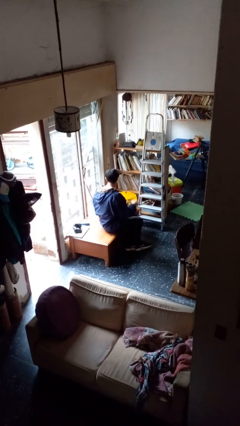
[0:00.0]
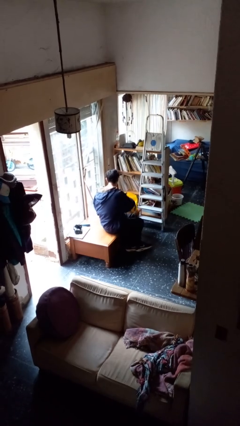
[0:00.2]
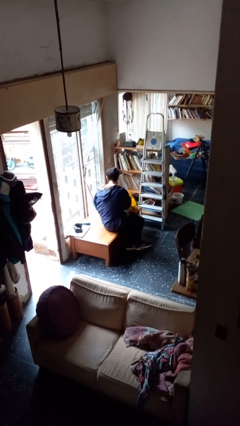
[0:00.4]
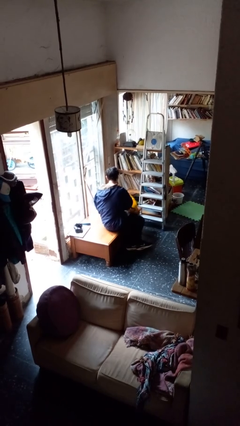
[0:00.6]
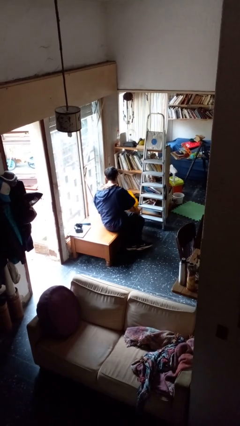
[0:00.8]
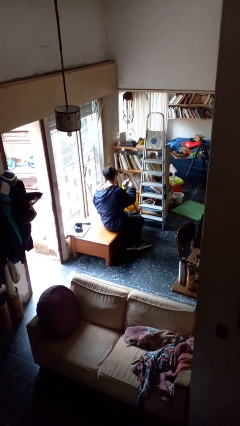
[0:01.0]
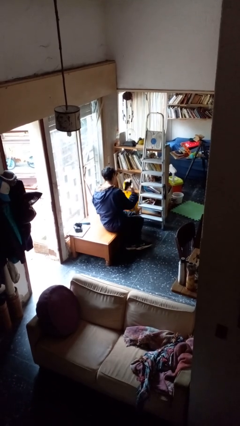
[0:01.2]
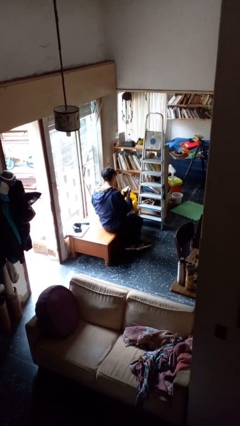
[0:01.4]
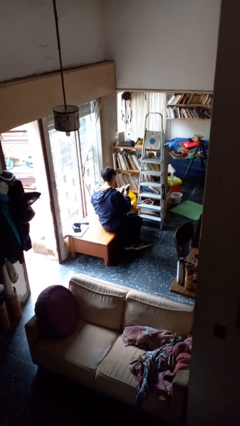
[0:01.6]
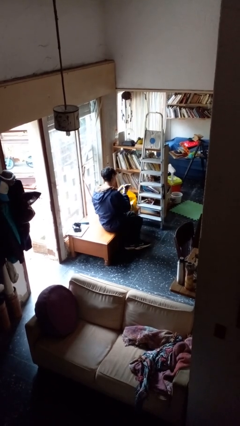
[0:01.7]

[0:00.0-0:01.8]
person takes object from bag

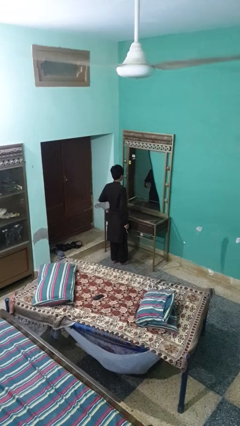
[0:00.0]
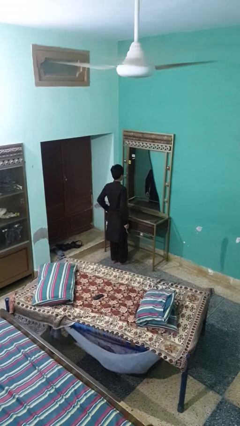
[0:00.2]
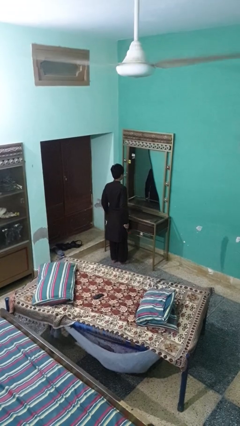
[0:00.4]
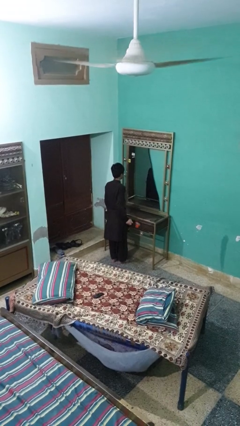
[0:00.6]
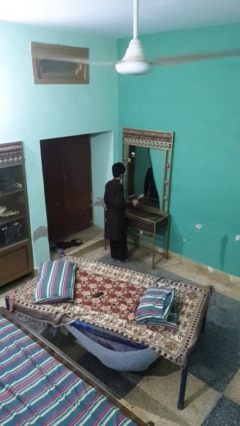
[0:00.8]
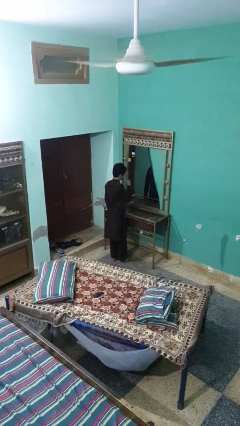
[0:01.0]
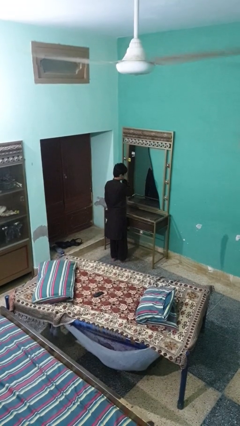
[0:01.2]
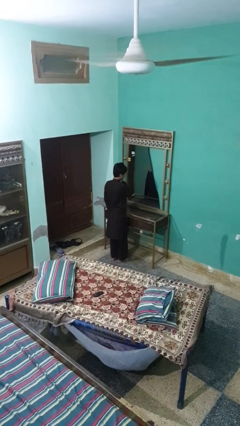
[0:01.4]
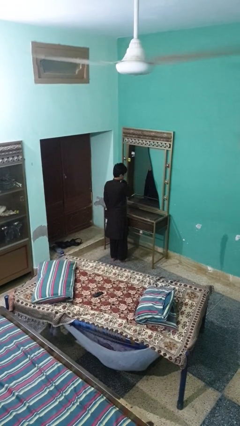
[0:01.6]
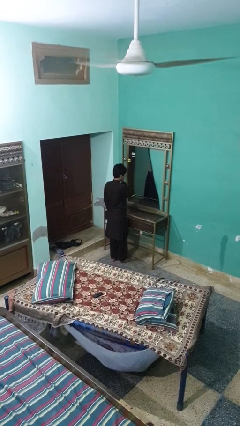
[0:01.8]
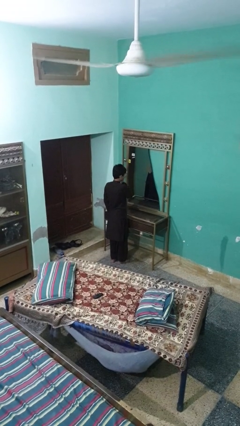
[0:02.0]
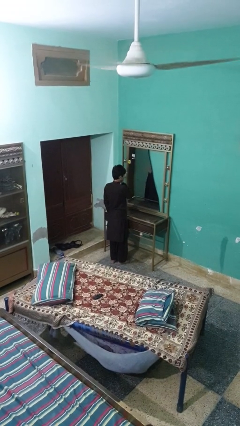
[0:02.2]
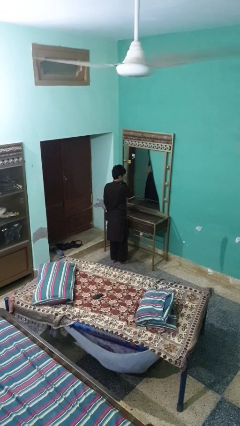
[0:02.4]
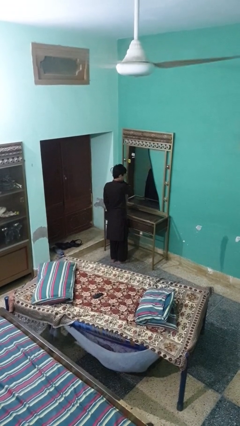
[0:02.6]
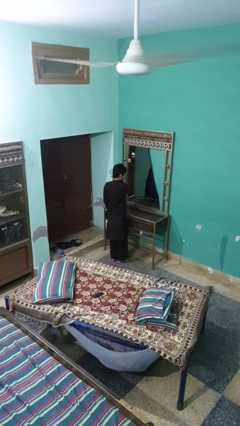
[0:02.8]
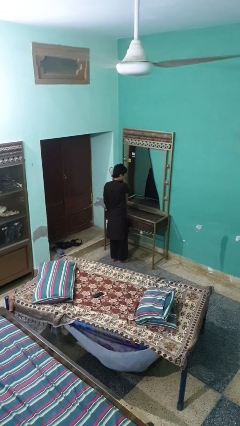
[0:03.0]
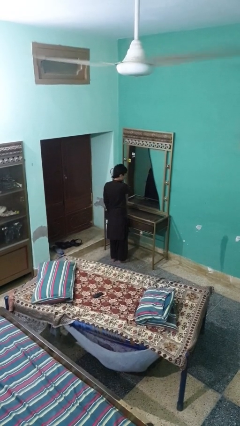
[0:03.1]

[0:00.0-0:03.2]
person brushes hair

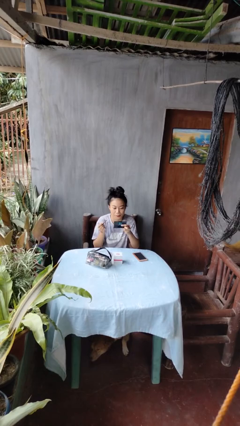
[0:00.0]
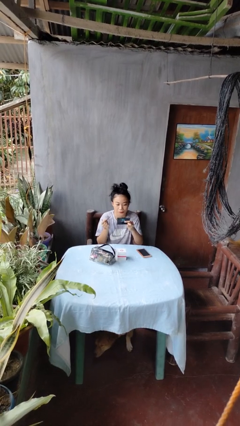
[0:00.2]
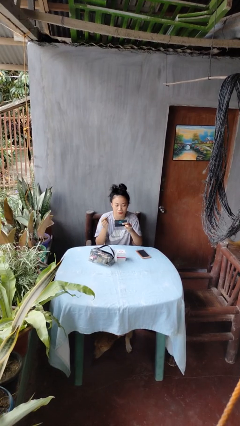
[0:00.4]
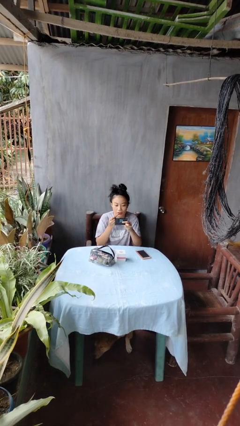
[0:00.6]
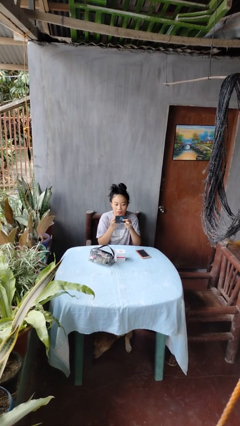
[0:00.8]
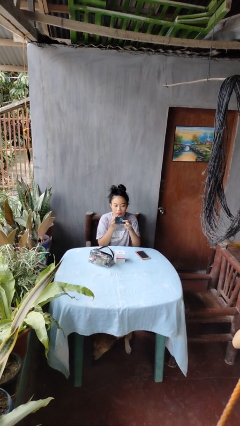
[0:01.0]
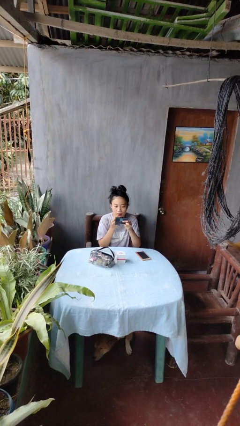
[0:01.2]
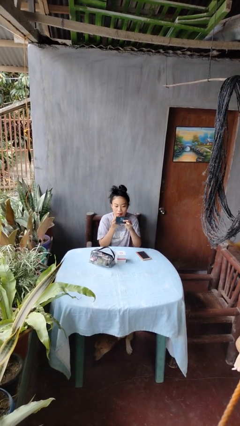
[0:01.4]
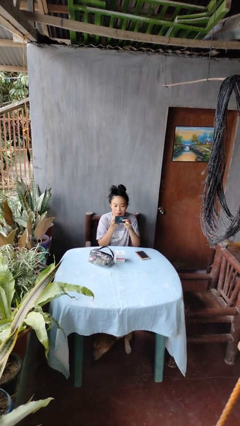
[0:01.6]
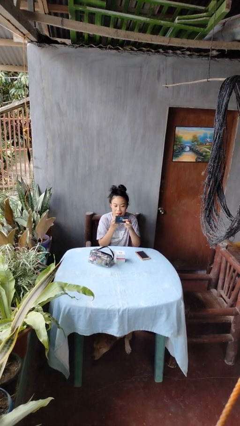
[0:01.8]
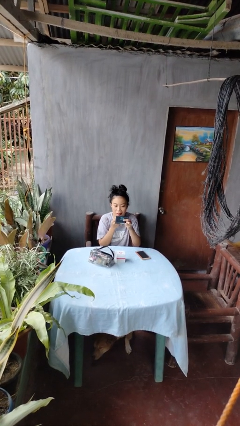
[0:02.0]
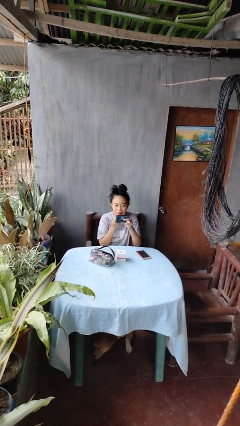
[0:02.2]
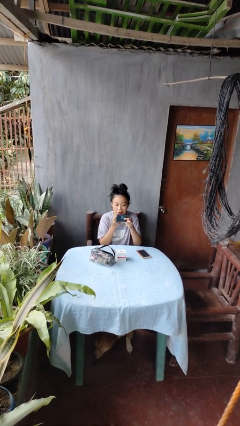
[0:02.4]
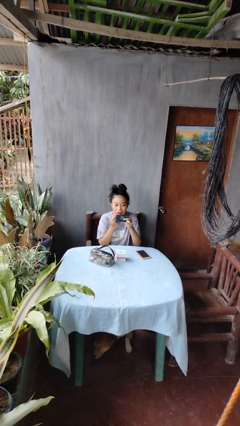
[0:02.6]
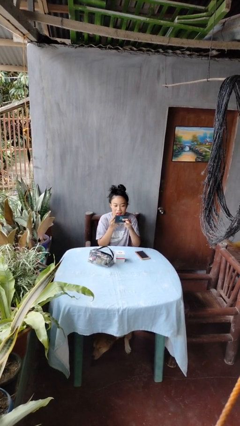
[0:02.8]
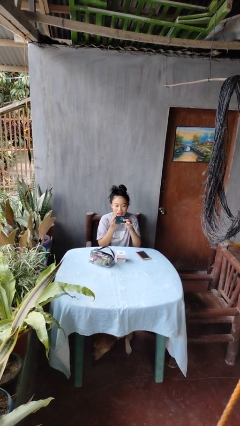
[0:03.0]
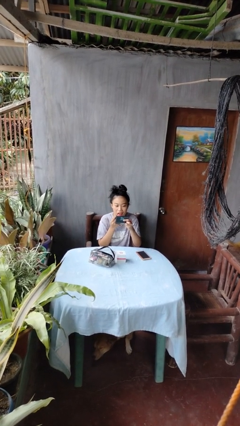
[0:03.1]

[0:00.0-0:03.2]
person applies lip makeup

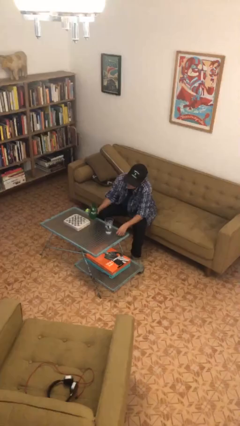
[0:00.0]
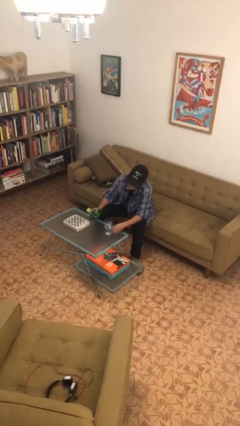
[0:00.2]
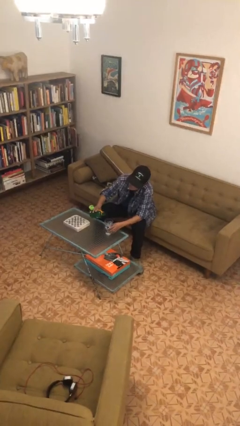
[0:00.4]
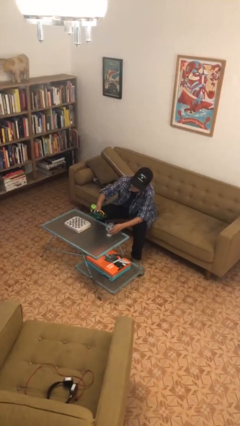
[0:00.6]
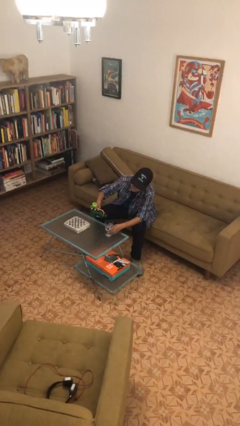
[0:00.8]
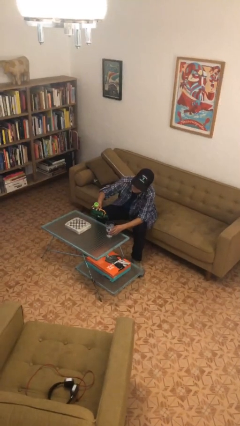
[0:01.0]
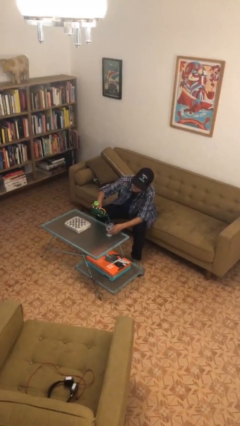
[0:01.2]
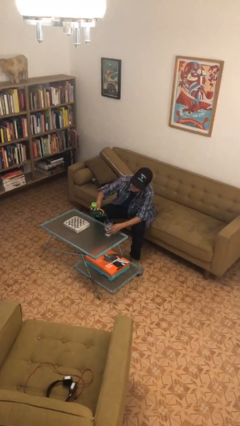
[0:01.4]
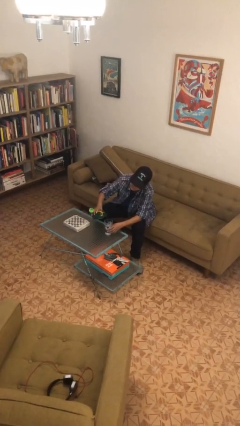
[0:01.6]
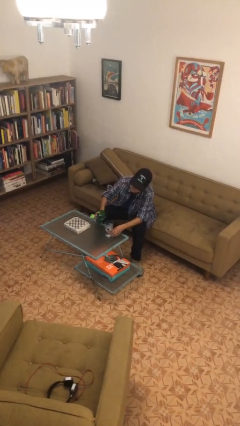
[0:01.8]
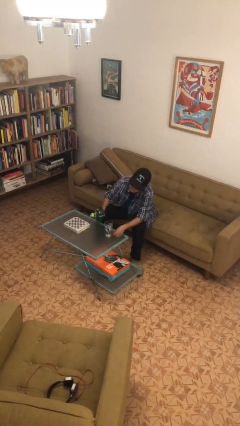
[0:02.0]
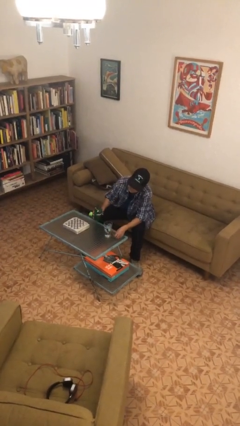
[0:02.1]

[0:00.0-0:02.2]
person pours liquid into cup

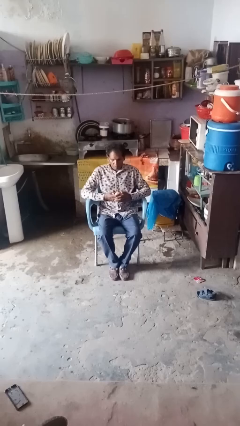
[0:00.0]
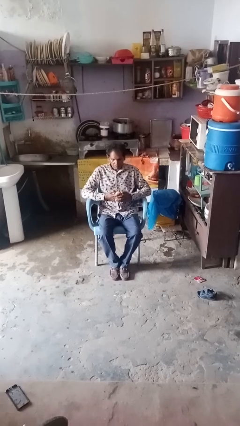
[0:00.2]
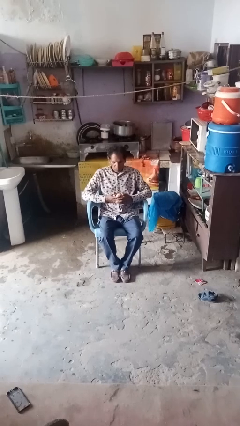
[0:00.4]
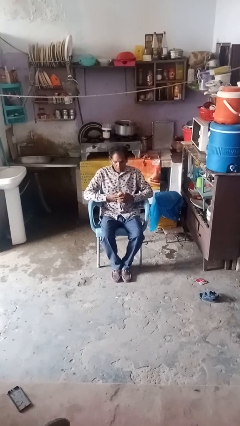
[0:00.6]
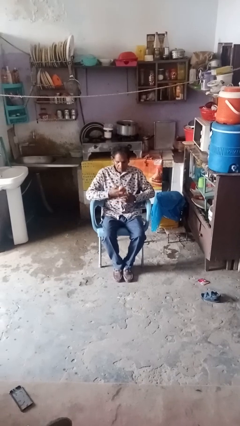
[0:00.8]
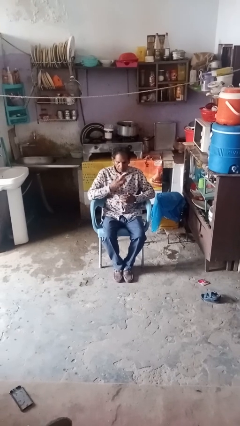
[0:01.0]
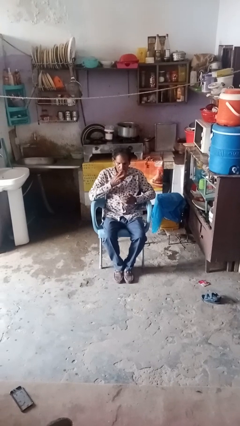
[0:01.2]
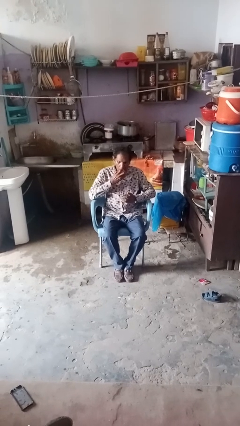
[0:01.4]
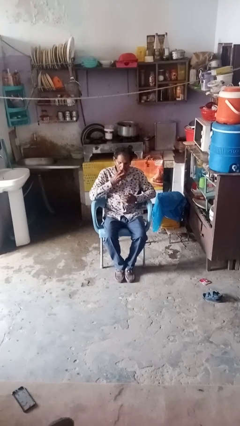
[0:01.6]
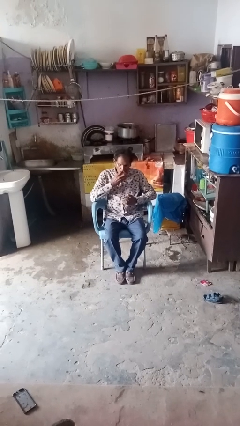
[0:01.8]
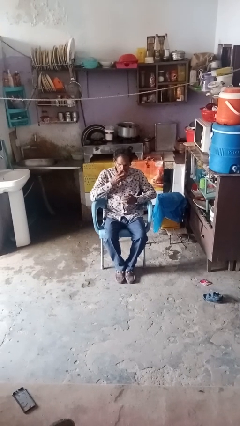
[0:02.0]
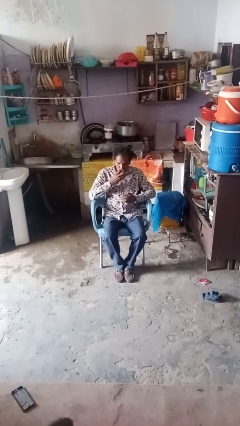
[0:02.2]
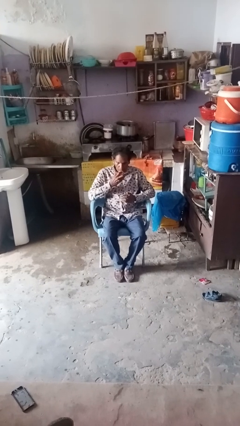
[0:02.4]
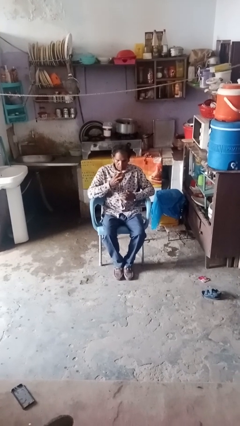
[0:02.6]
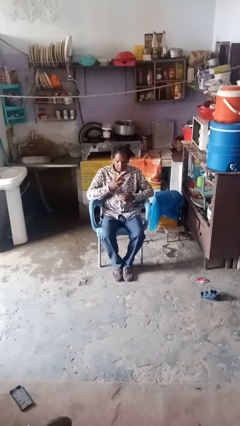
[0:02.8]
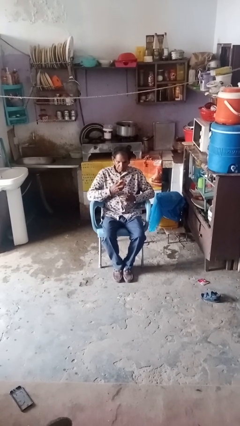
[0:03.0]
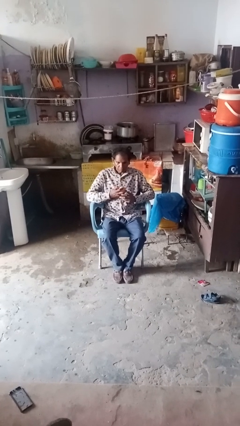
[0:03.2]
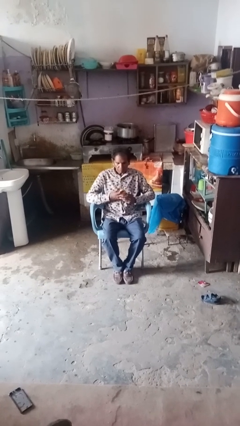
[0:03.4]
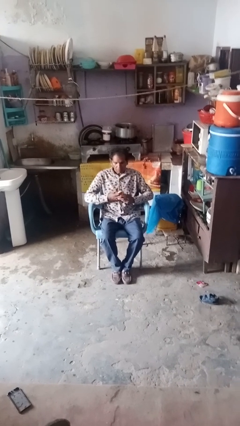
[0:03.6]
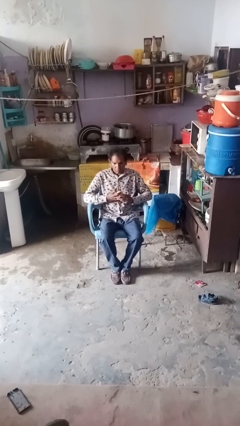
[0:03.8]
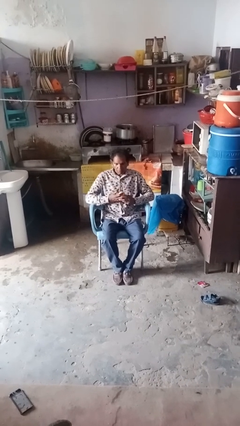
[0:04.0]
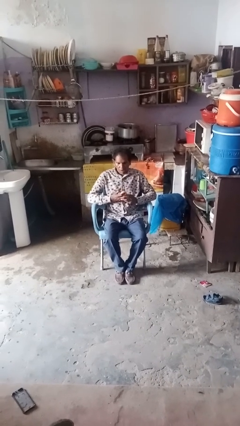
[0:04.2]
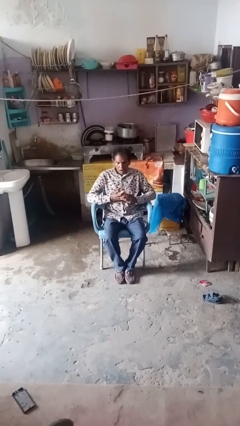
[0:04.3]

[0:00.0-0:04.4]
person eats apple

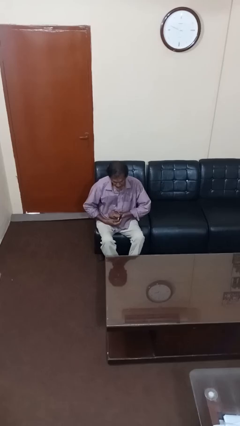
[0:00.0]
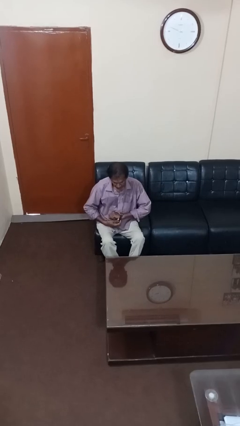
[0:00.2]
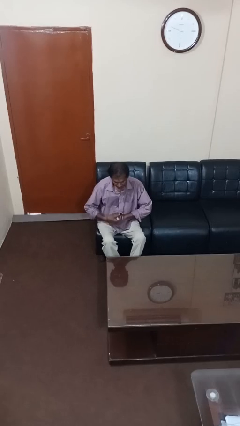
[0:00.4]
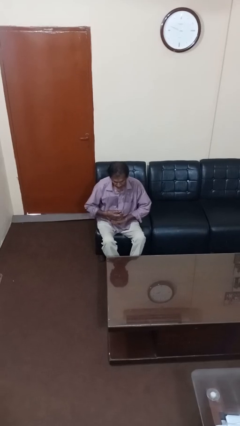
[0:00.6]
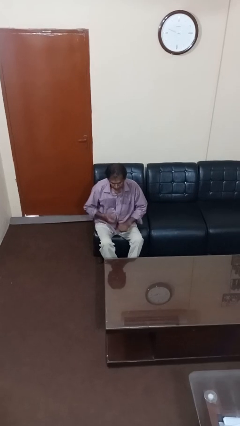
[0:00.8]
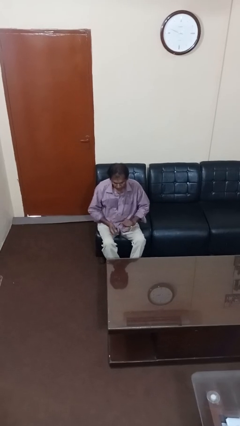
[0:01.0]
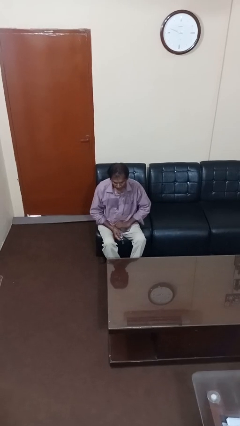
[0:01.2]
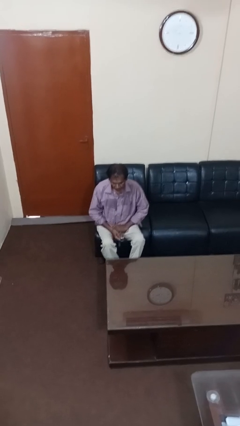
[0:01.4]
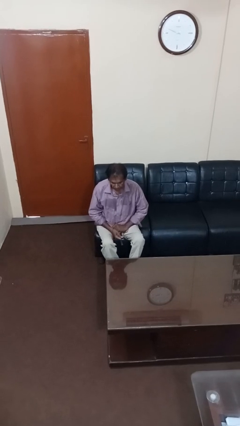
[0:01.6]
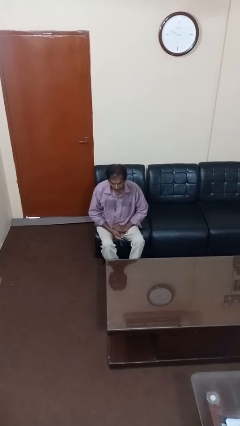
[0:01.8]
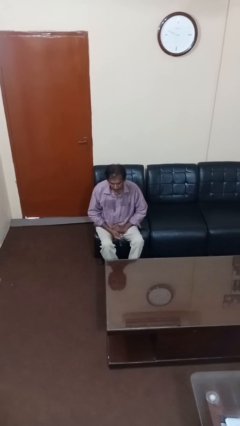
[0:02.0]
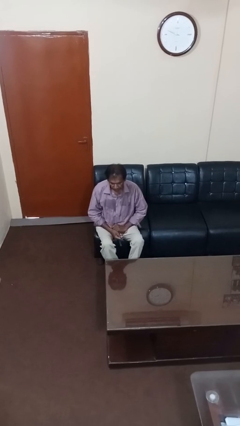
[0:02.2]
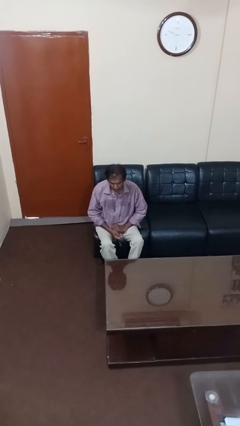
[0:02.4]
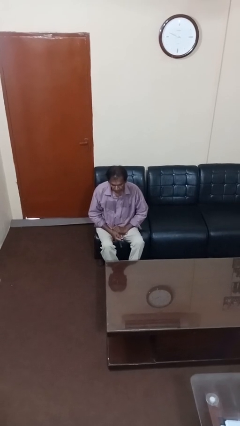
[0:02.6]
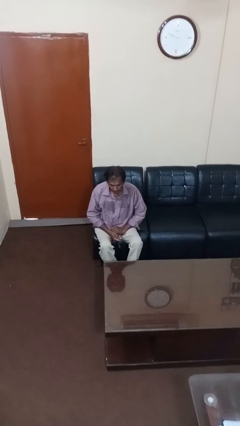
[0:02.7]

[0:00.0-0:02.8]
person takes off wristwatch
